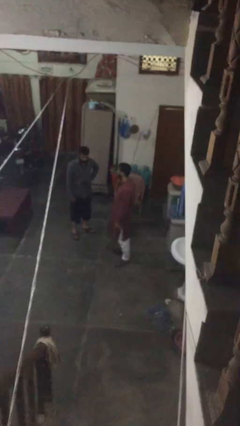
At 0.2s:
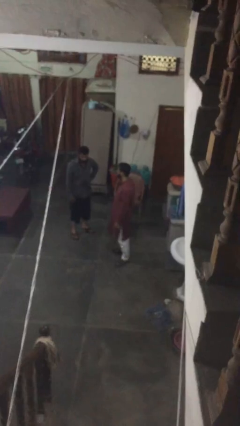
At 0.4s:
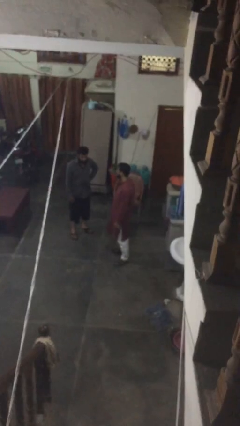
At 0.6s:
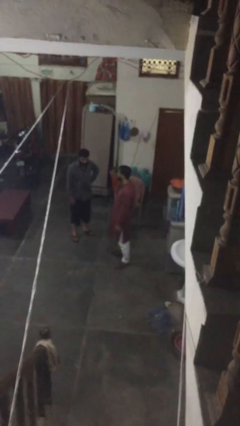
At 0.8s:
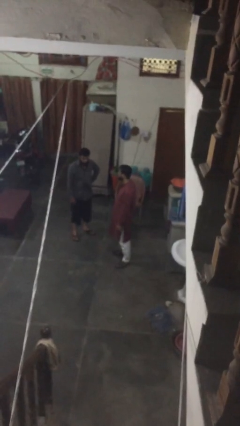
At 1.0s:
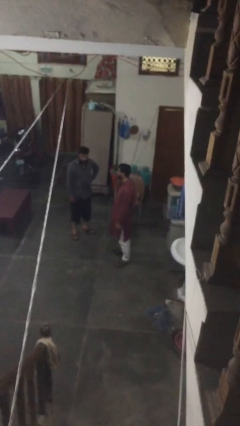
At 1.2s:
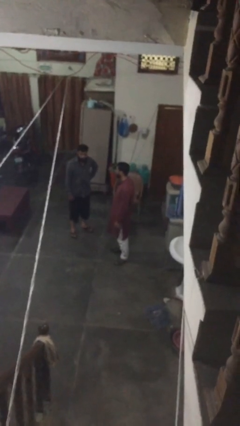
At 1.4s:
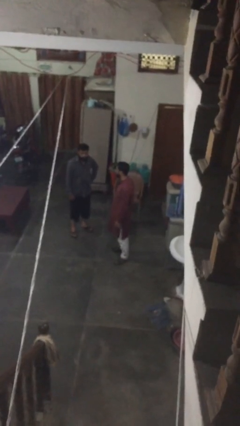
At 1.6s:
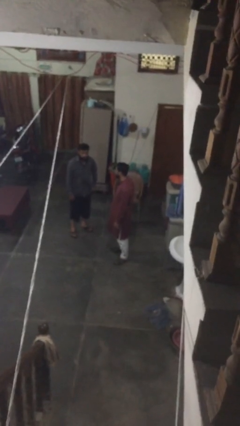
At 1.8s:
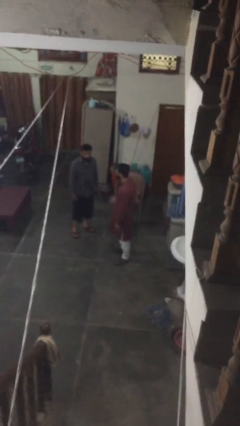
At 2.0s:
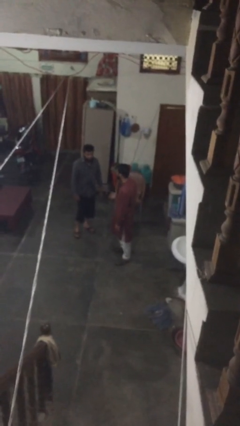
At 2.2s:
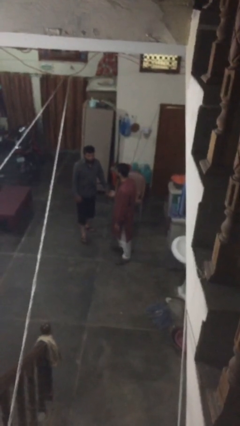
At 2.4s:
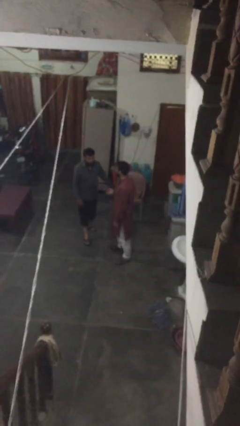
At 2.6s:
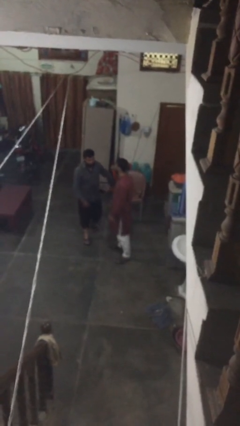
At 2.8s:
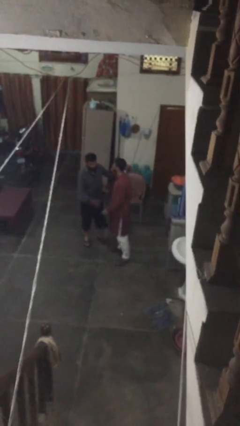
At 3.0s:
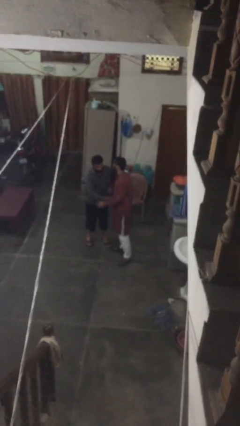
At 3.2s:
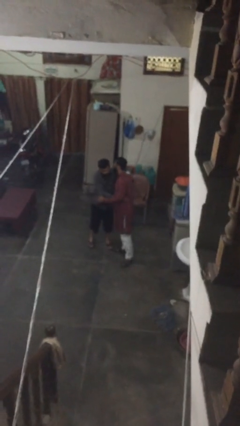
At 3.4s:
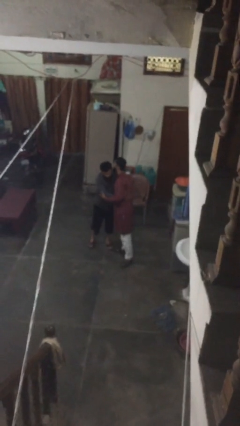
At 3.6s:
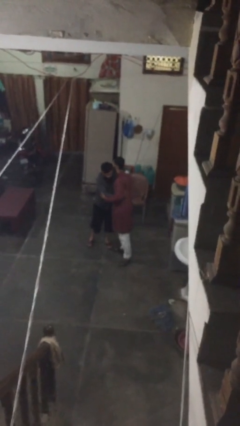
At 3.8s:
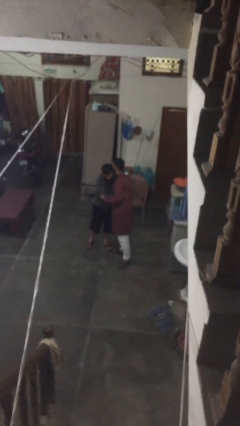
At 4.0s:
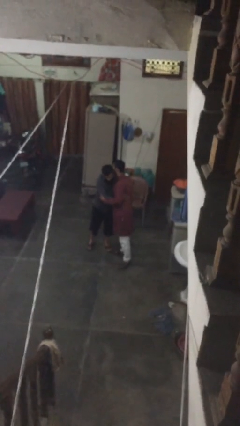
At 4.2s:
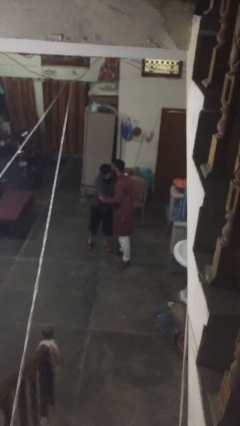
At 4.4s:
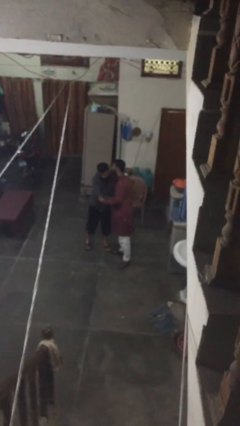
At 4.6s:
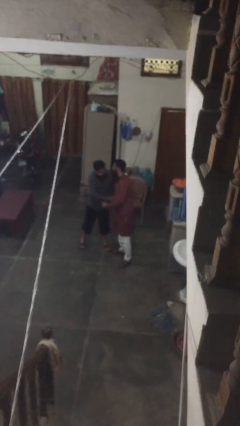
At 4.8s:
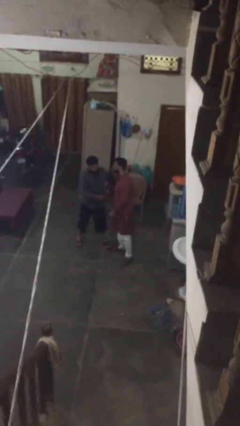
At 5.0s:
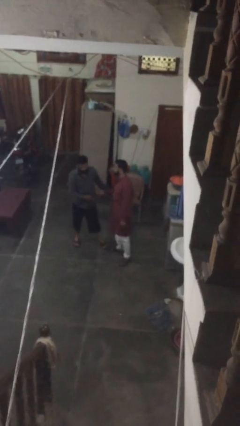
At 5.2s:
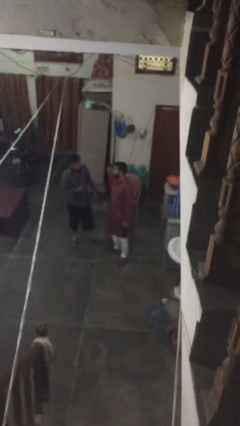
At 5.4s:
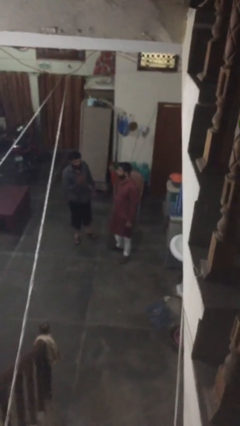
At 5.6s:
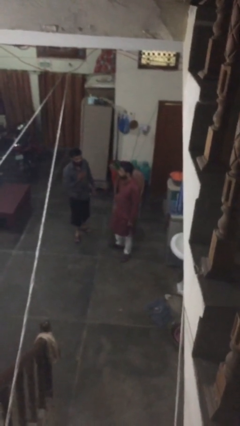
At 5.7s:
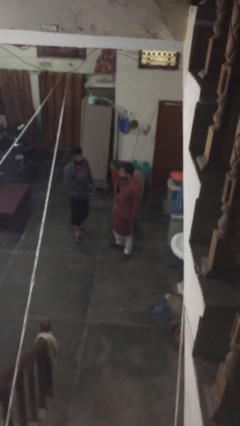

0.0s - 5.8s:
person embraces person

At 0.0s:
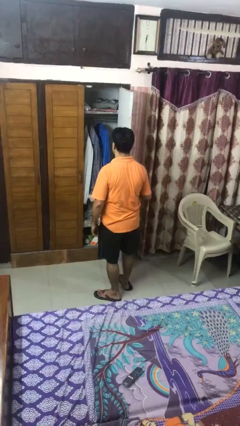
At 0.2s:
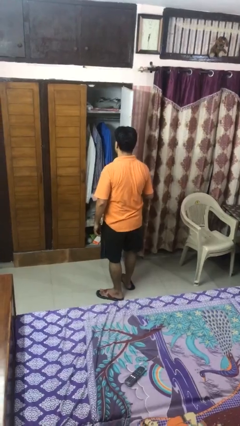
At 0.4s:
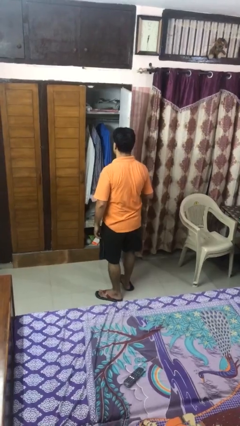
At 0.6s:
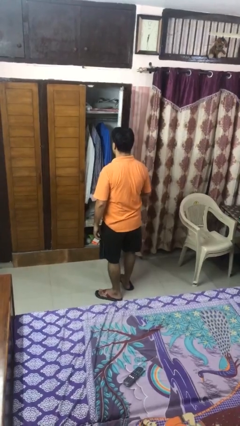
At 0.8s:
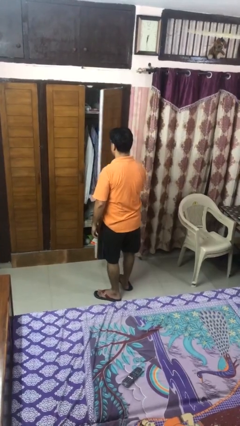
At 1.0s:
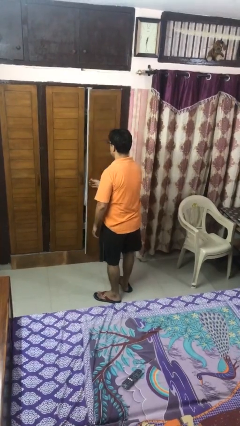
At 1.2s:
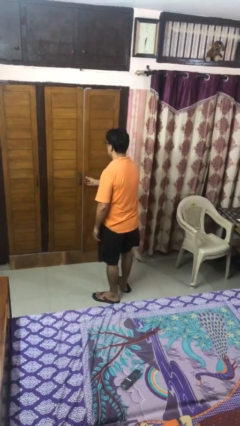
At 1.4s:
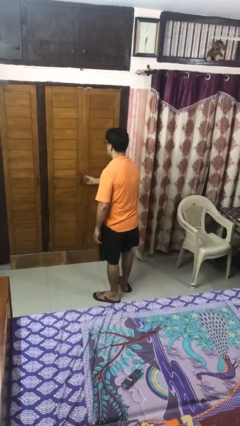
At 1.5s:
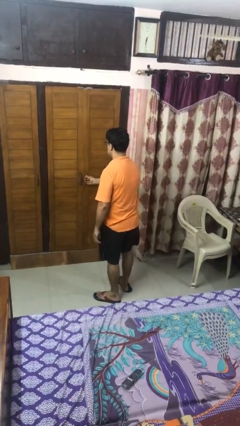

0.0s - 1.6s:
person closes closet door

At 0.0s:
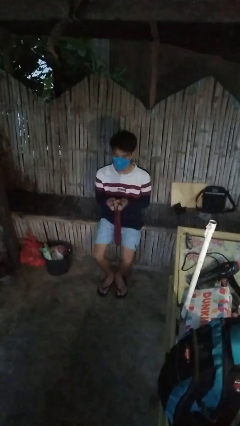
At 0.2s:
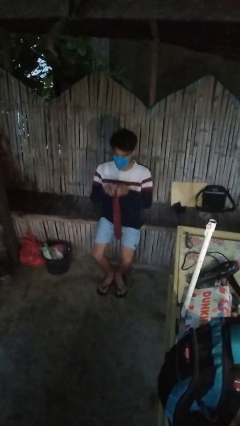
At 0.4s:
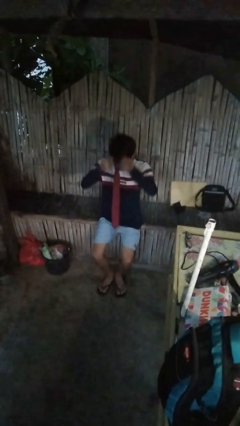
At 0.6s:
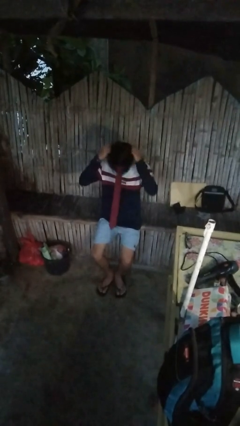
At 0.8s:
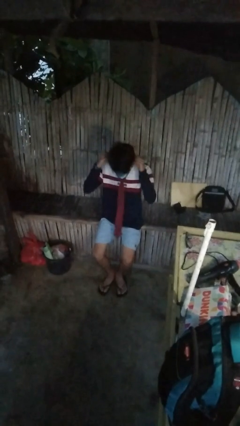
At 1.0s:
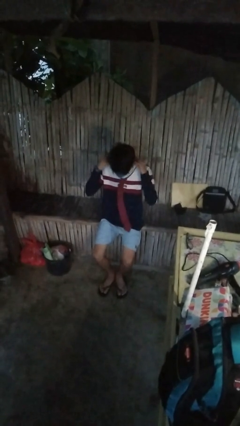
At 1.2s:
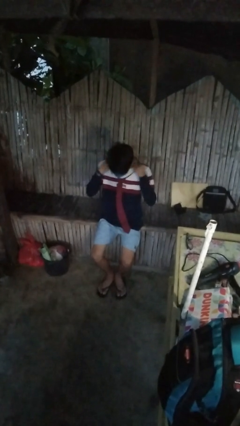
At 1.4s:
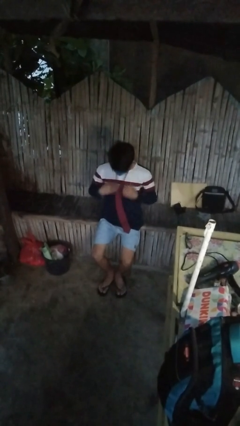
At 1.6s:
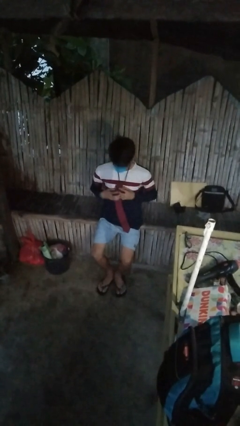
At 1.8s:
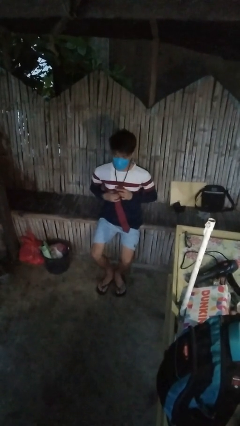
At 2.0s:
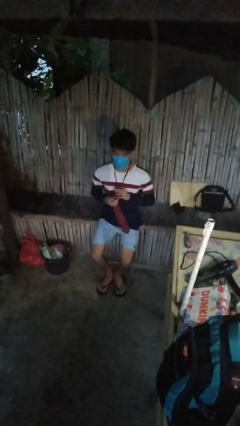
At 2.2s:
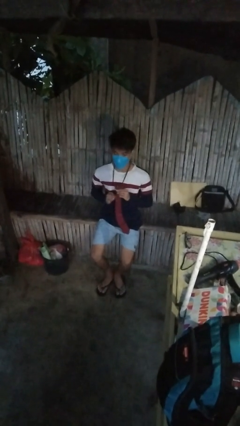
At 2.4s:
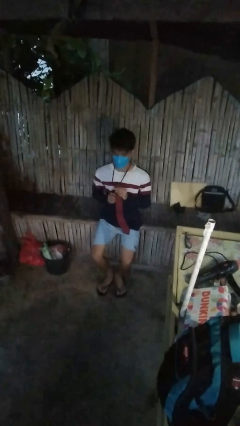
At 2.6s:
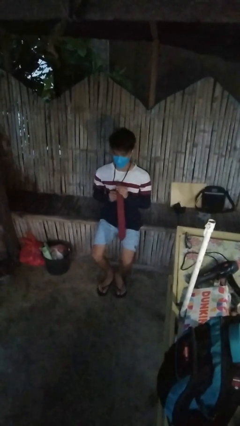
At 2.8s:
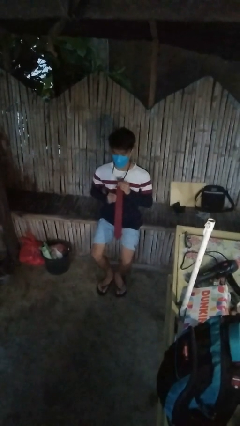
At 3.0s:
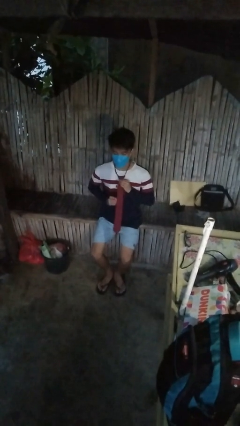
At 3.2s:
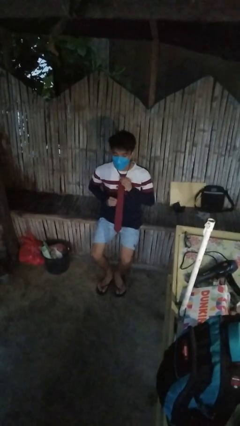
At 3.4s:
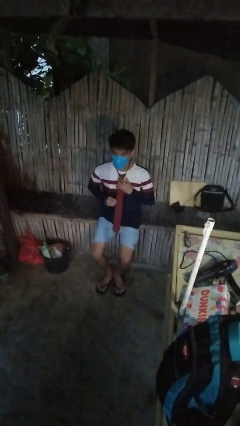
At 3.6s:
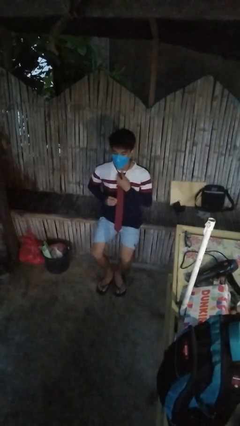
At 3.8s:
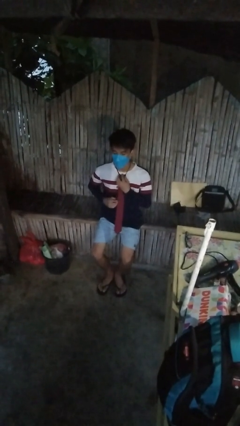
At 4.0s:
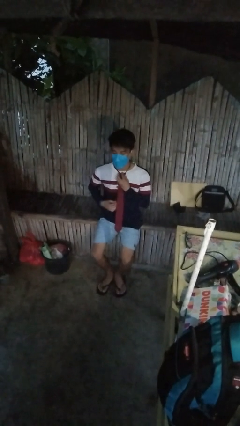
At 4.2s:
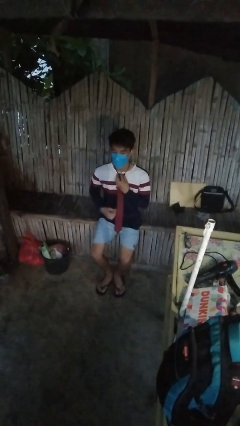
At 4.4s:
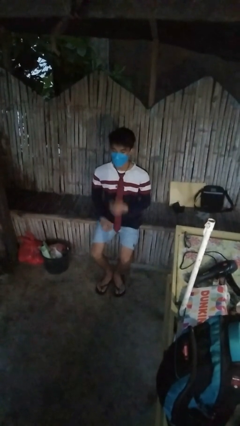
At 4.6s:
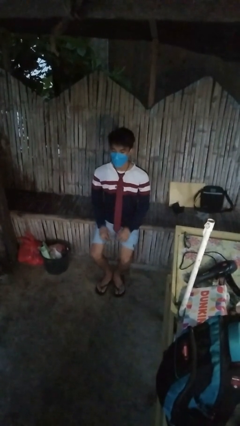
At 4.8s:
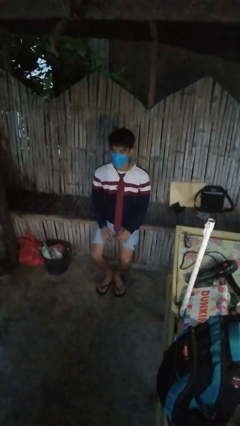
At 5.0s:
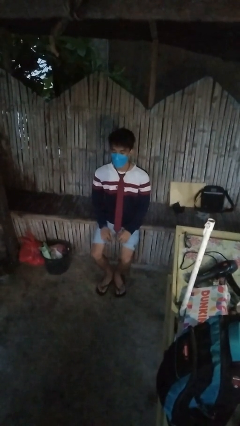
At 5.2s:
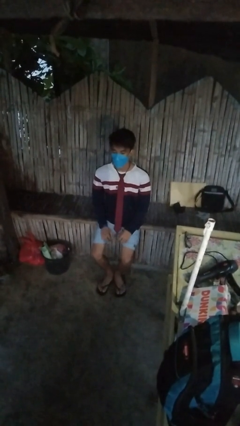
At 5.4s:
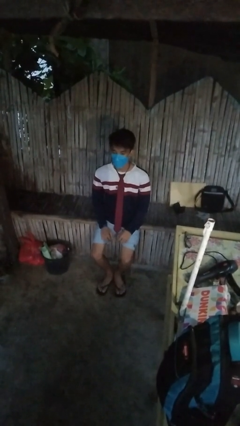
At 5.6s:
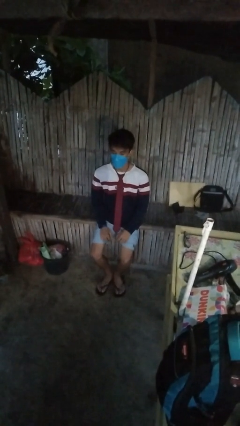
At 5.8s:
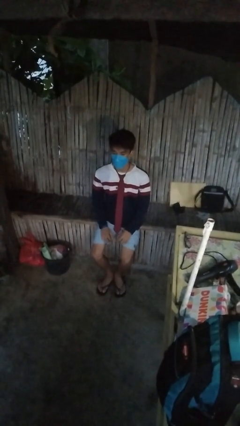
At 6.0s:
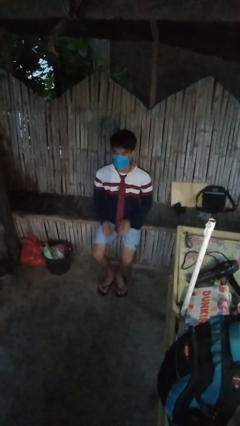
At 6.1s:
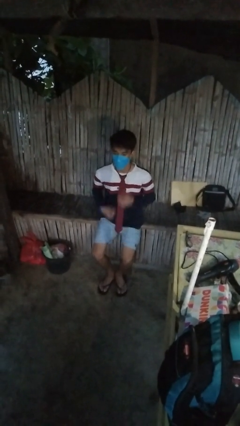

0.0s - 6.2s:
person puts on necktie

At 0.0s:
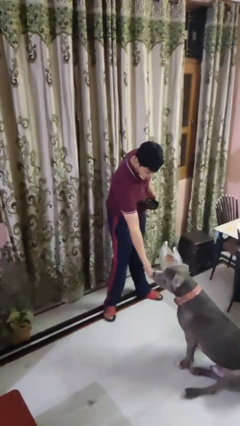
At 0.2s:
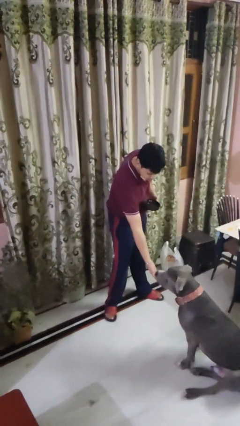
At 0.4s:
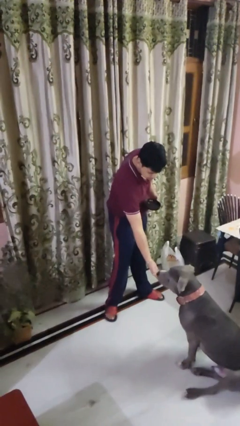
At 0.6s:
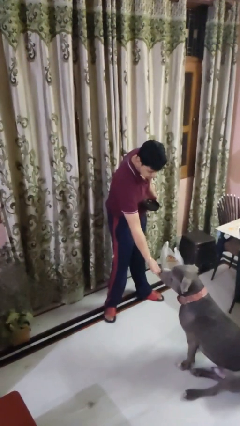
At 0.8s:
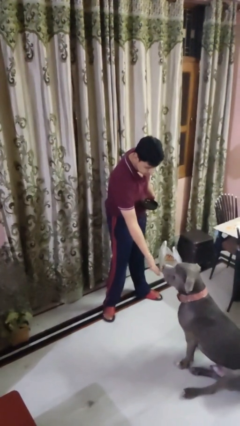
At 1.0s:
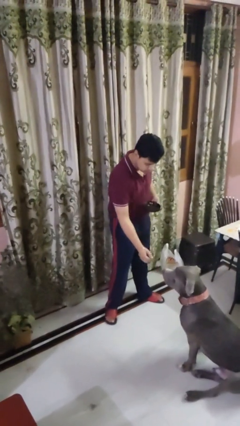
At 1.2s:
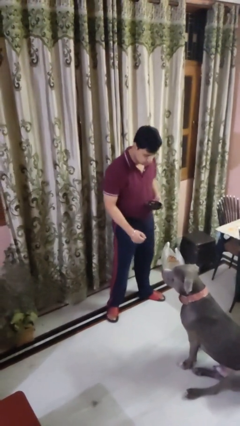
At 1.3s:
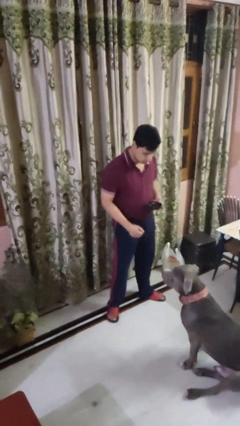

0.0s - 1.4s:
person feeds dog

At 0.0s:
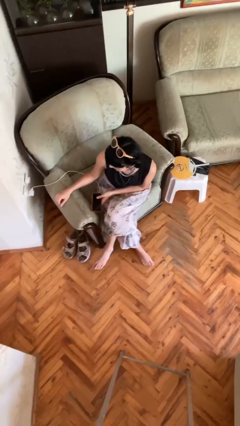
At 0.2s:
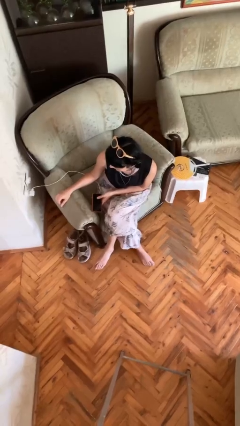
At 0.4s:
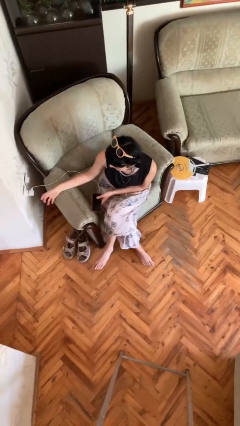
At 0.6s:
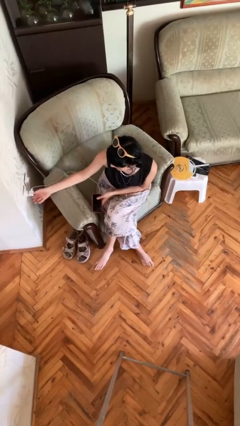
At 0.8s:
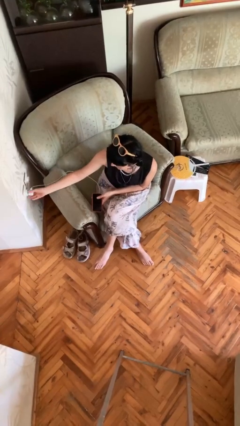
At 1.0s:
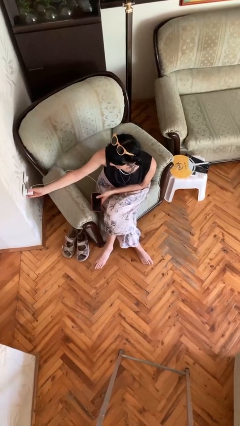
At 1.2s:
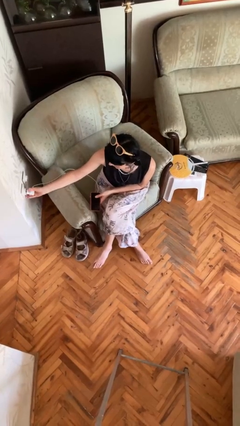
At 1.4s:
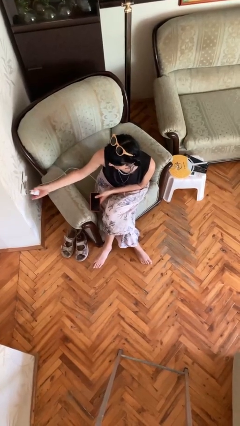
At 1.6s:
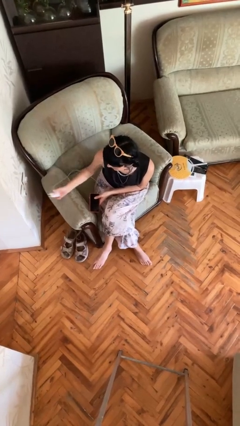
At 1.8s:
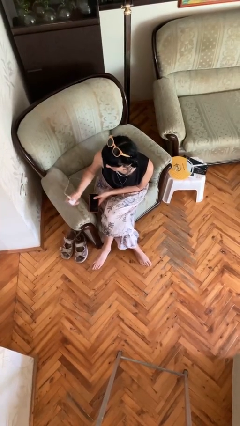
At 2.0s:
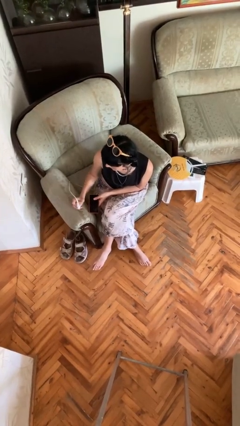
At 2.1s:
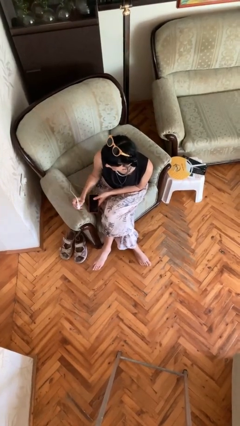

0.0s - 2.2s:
person unplugs from electrical socket
